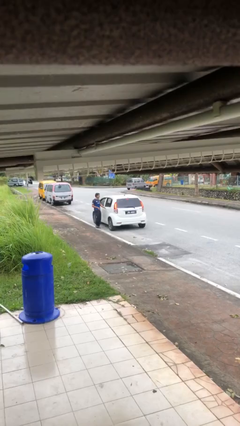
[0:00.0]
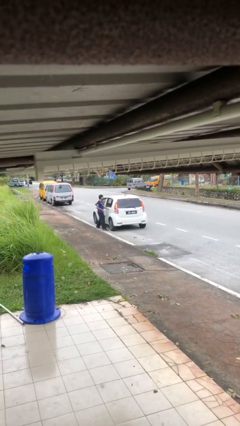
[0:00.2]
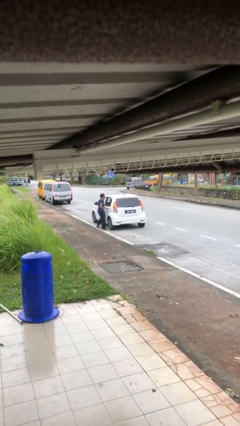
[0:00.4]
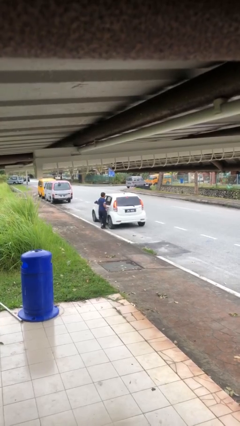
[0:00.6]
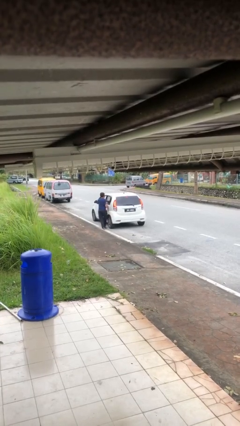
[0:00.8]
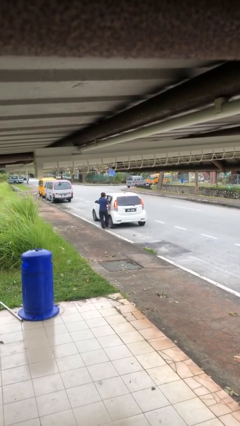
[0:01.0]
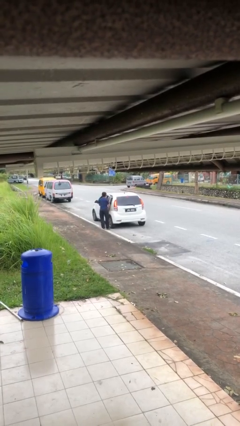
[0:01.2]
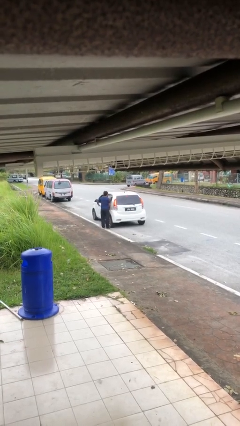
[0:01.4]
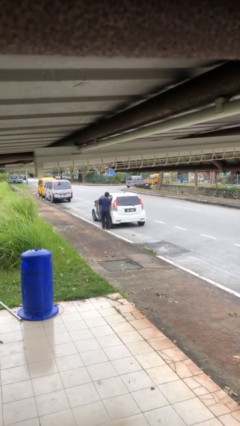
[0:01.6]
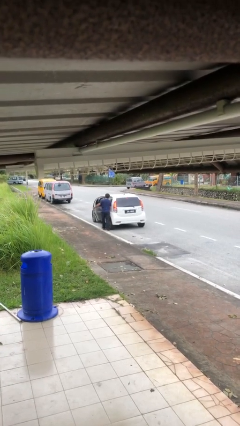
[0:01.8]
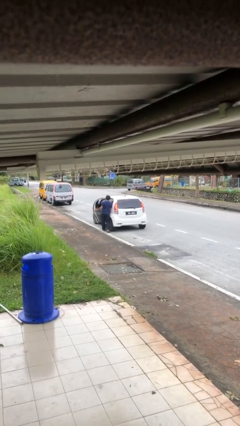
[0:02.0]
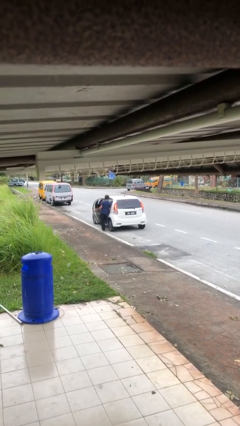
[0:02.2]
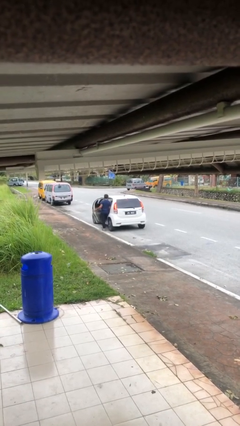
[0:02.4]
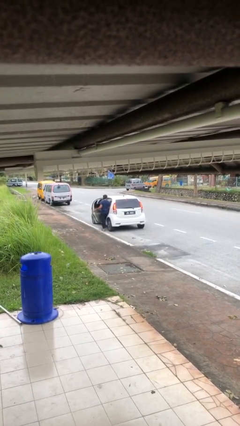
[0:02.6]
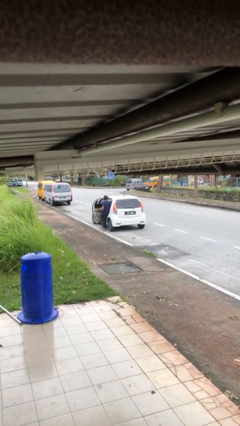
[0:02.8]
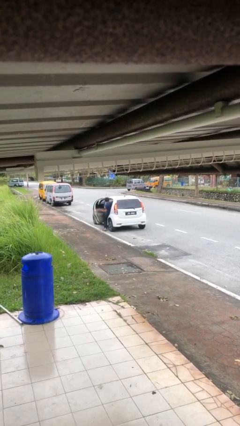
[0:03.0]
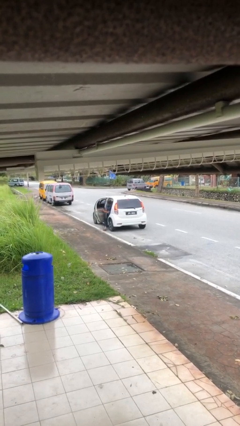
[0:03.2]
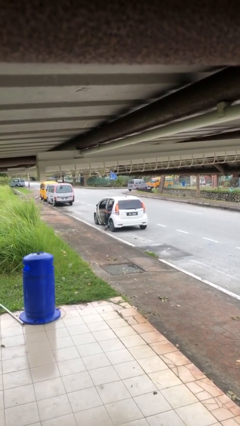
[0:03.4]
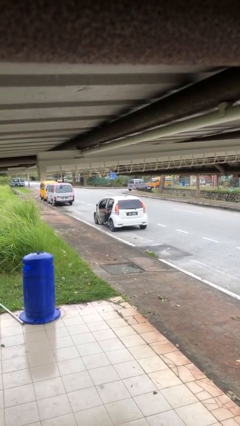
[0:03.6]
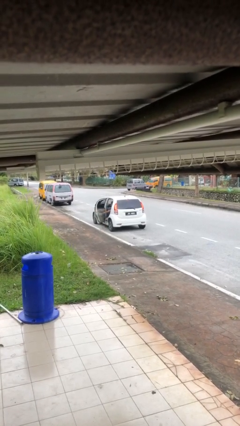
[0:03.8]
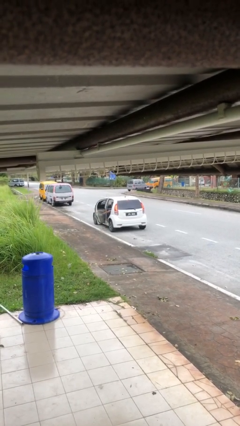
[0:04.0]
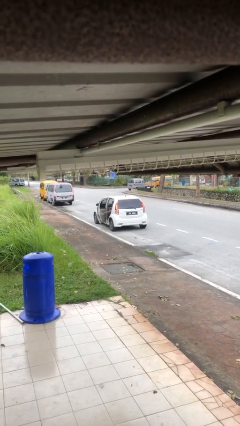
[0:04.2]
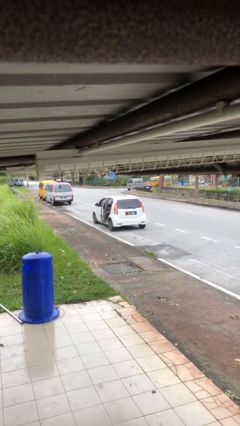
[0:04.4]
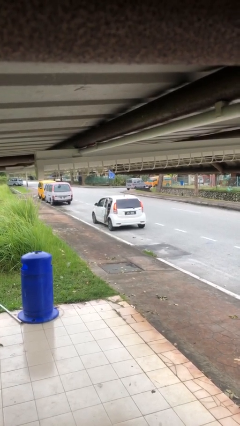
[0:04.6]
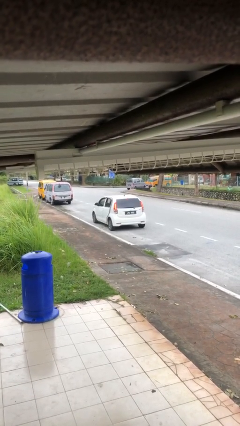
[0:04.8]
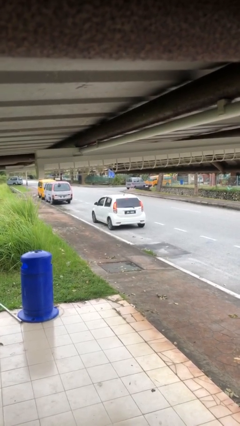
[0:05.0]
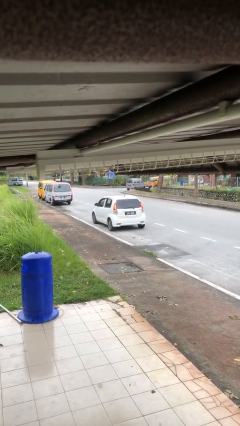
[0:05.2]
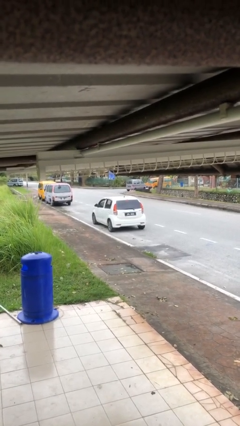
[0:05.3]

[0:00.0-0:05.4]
car picks up person

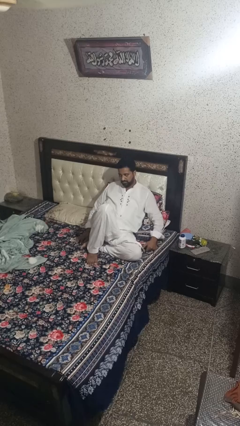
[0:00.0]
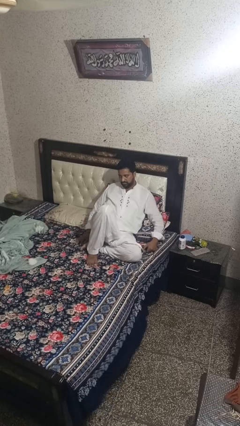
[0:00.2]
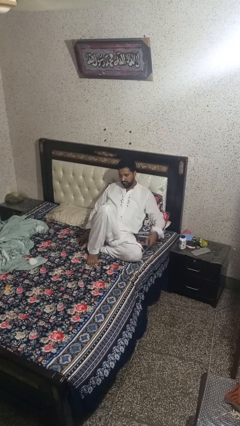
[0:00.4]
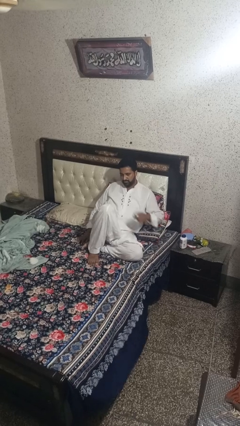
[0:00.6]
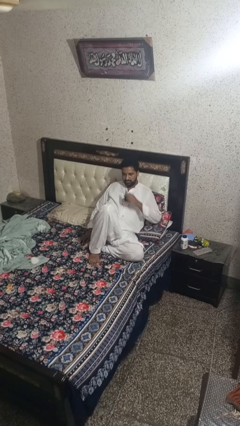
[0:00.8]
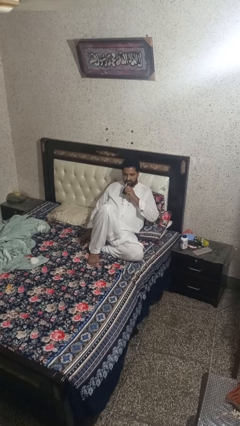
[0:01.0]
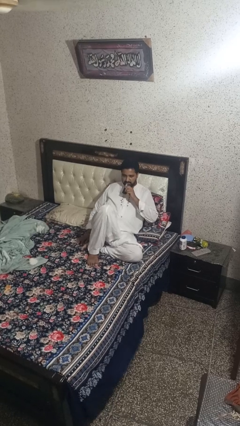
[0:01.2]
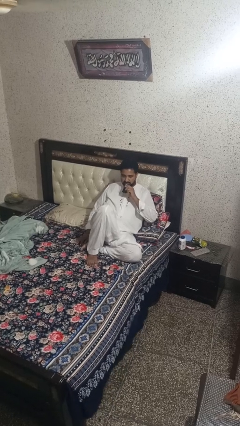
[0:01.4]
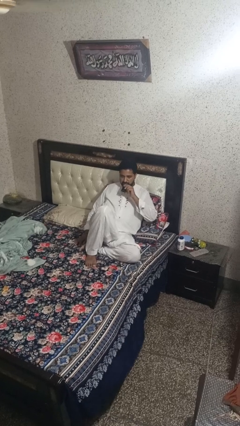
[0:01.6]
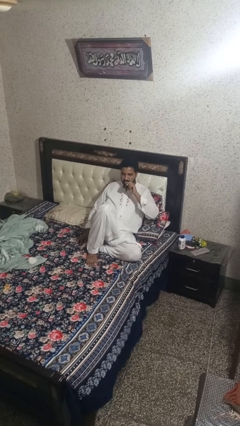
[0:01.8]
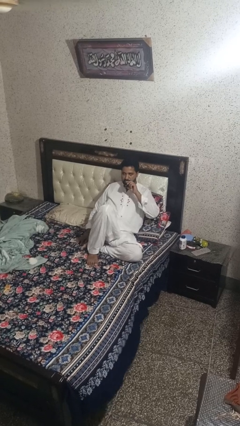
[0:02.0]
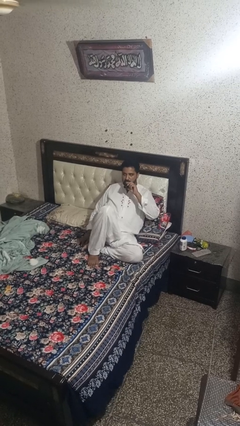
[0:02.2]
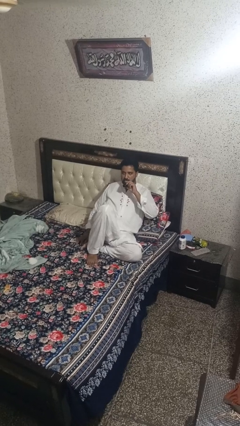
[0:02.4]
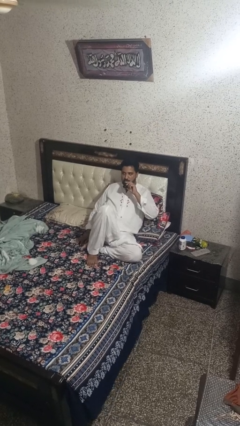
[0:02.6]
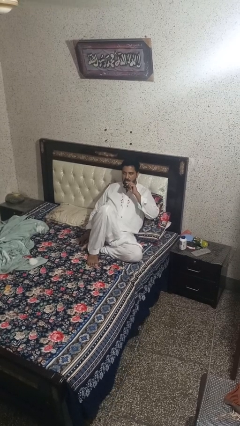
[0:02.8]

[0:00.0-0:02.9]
person vapes

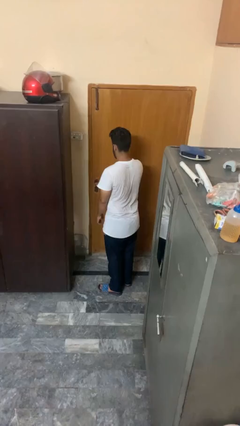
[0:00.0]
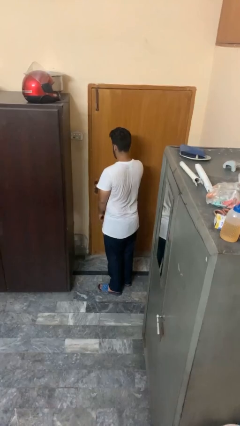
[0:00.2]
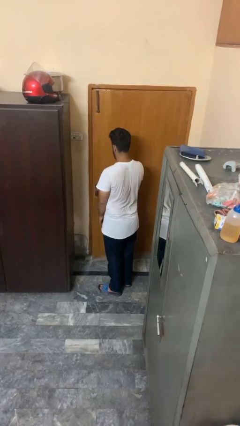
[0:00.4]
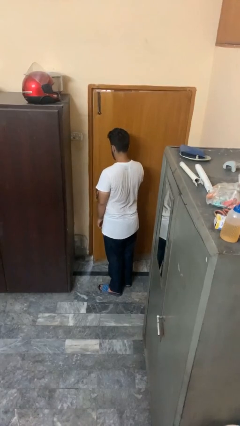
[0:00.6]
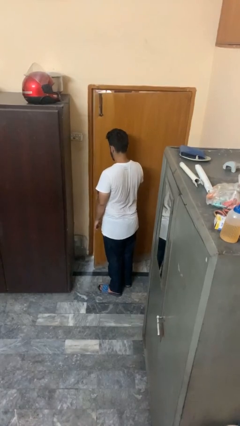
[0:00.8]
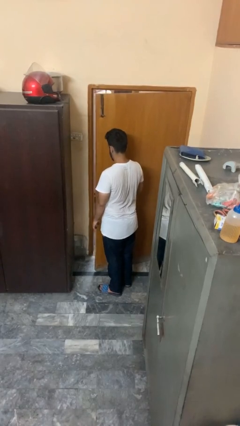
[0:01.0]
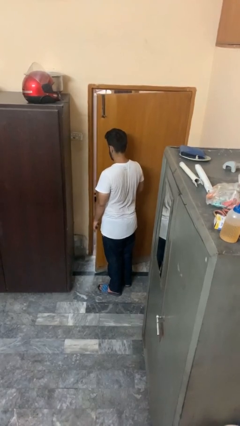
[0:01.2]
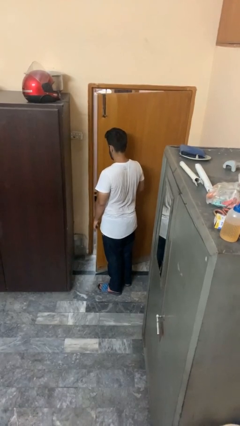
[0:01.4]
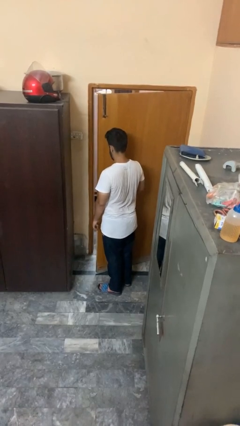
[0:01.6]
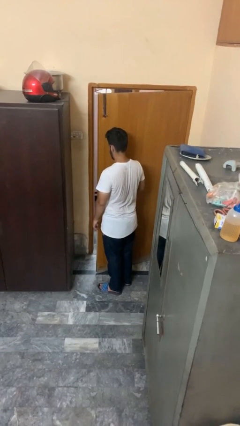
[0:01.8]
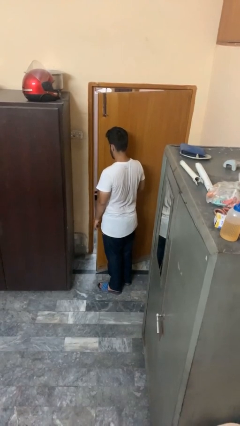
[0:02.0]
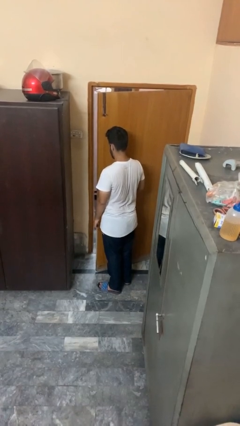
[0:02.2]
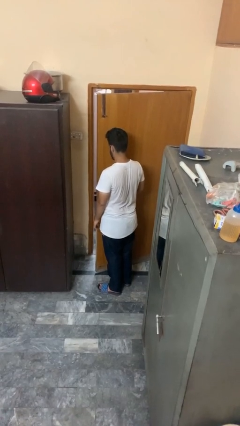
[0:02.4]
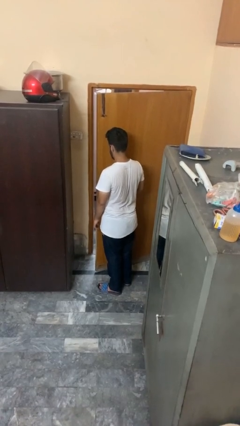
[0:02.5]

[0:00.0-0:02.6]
person opens facility door

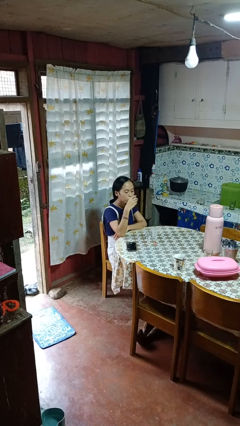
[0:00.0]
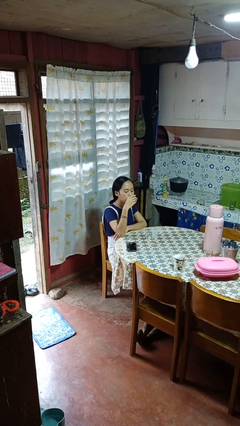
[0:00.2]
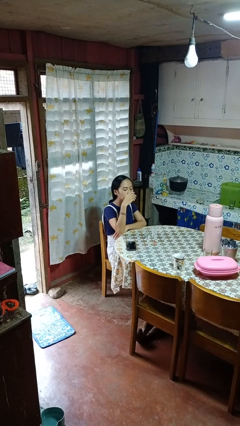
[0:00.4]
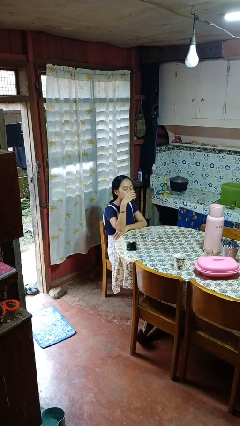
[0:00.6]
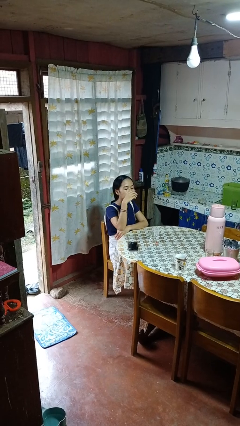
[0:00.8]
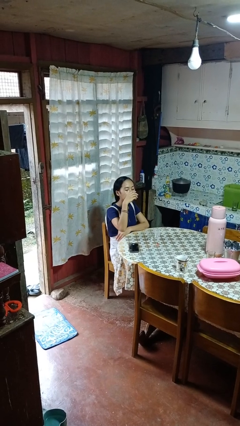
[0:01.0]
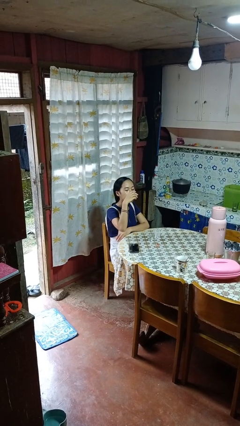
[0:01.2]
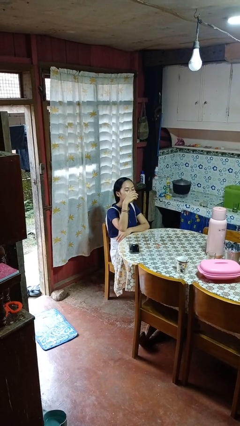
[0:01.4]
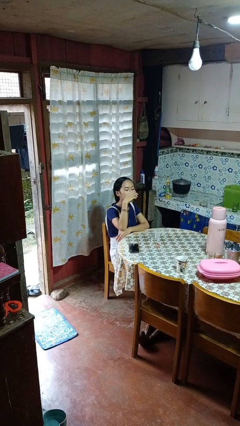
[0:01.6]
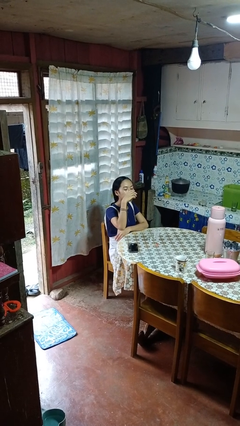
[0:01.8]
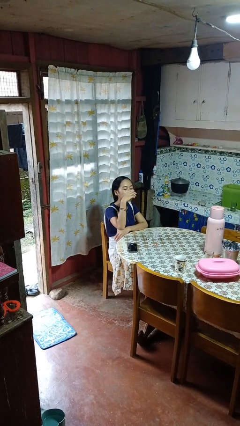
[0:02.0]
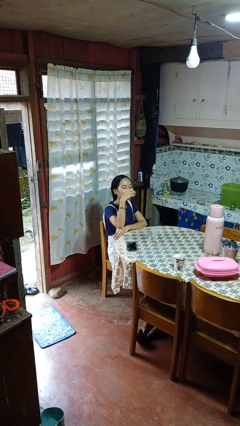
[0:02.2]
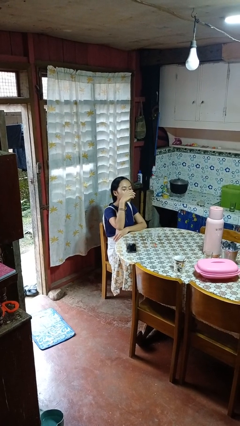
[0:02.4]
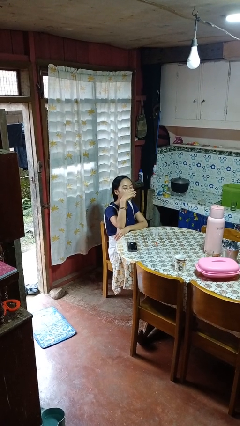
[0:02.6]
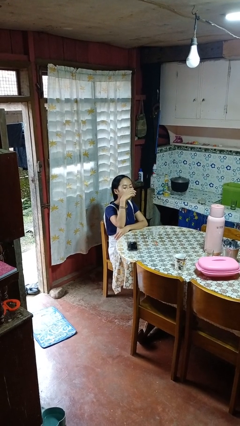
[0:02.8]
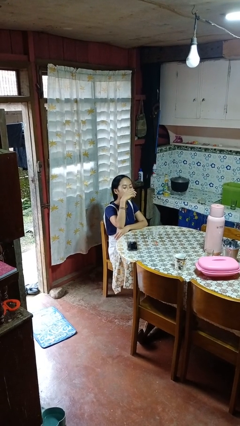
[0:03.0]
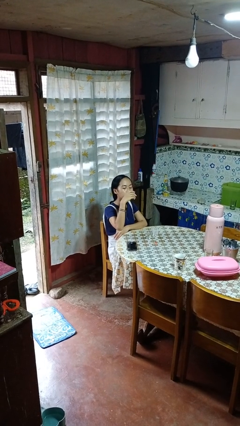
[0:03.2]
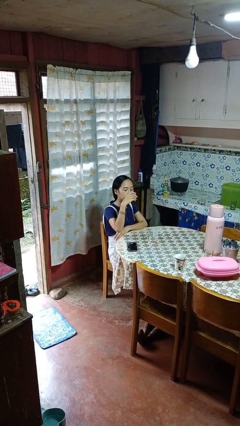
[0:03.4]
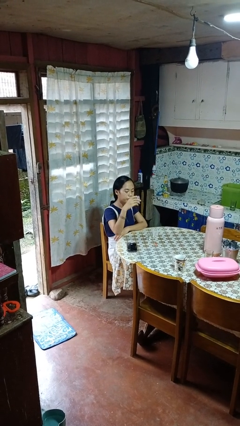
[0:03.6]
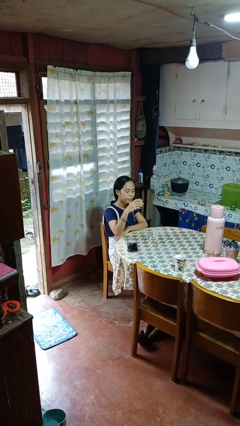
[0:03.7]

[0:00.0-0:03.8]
person drinks from shotglass

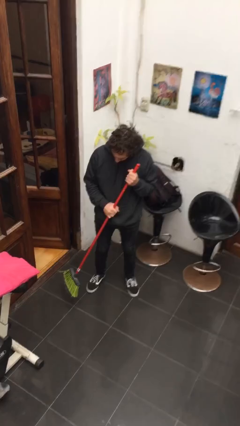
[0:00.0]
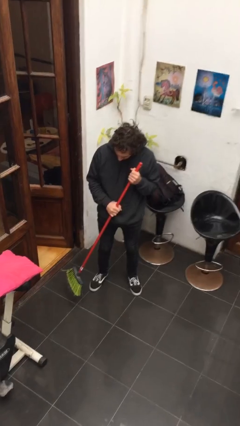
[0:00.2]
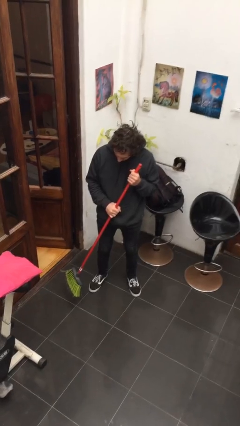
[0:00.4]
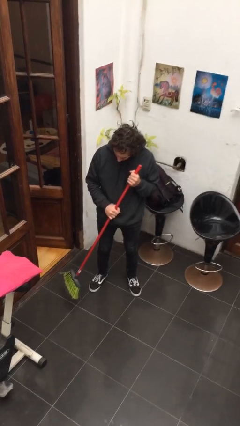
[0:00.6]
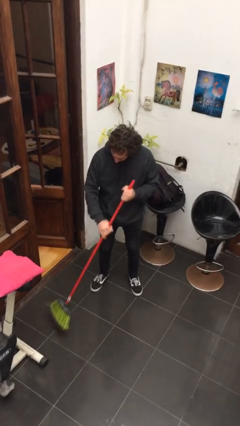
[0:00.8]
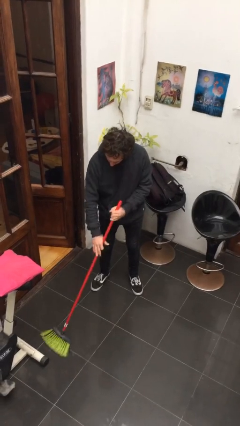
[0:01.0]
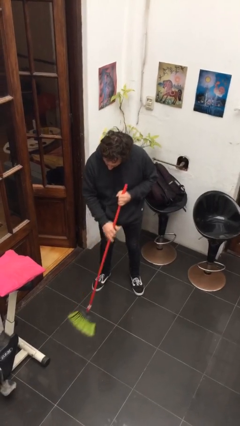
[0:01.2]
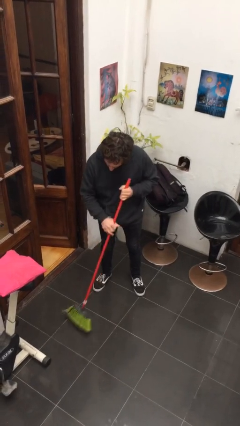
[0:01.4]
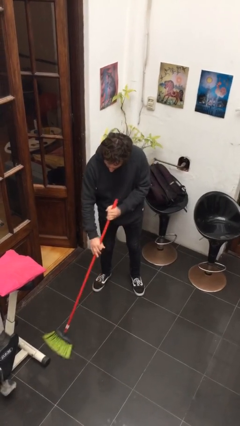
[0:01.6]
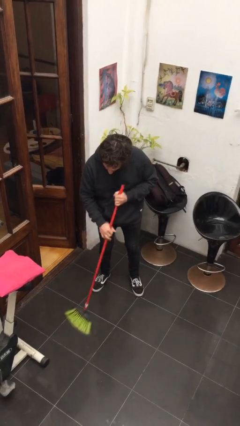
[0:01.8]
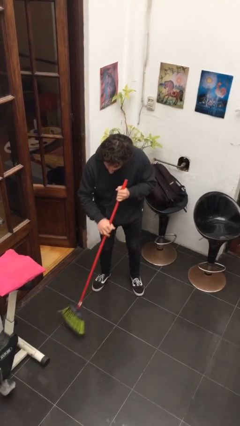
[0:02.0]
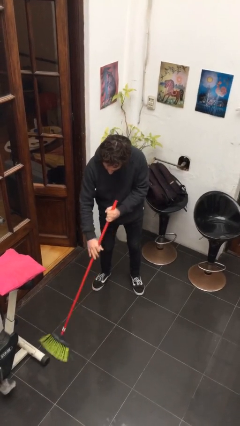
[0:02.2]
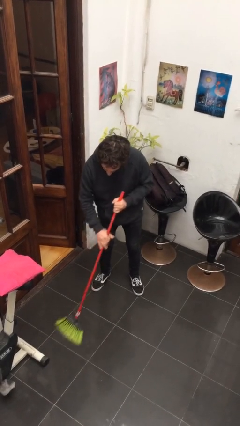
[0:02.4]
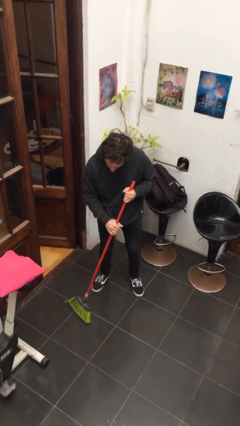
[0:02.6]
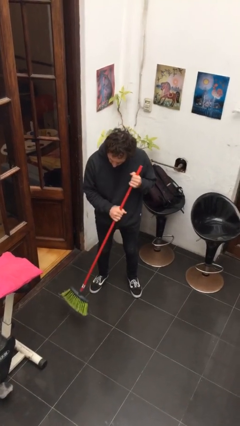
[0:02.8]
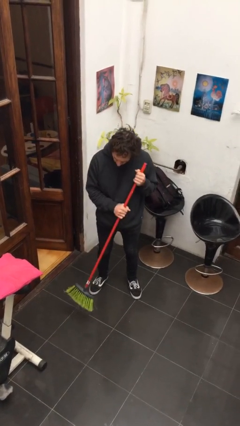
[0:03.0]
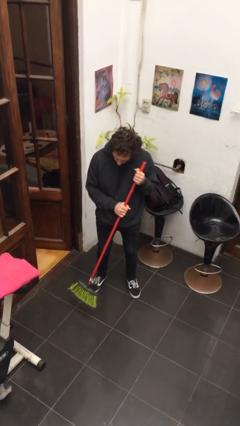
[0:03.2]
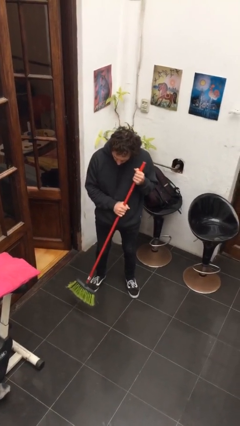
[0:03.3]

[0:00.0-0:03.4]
person sweeps floor
